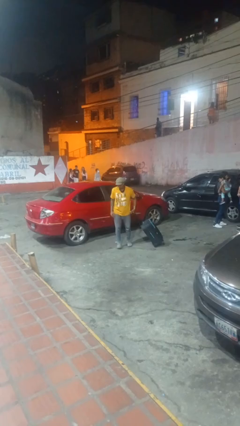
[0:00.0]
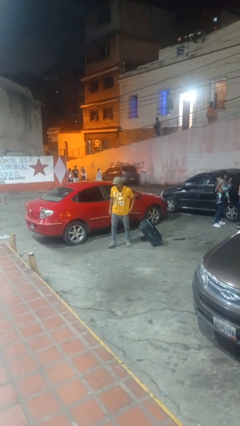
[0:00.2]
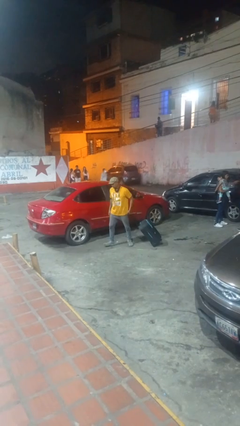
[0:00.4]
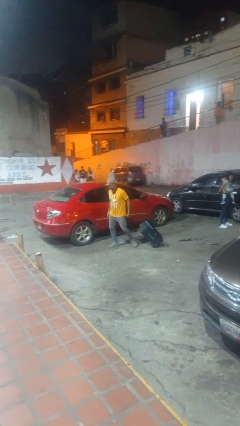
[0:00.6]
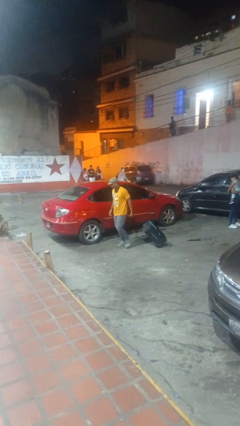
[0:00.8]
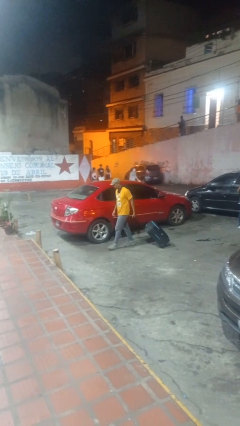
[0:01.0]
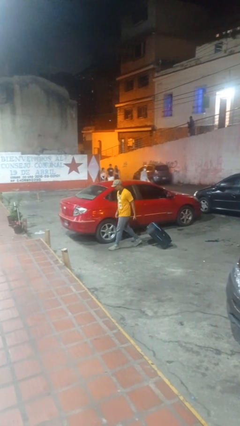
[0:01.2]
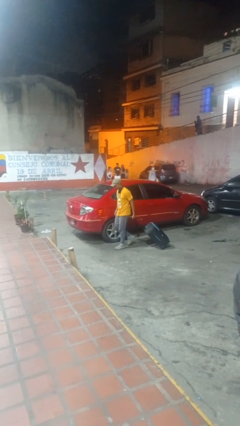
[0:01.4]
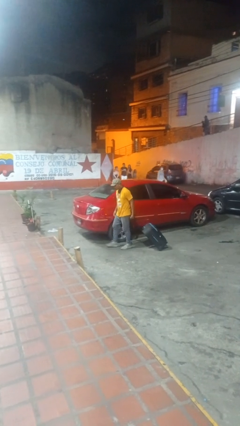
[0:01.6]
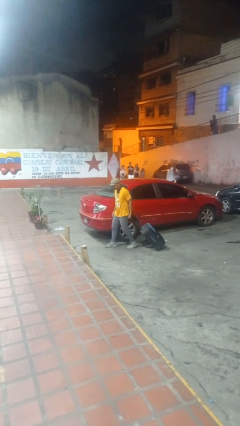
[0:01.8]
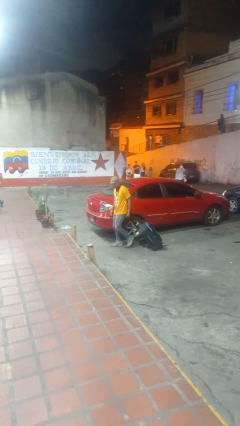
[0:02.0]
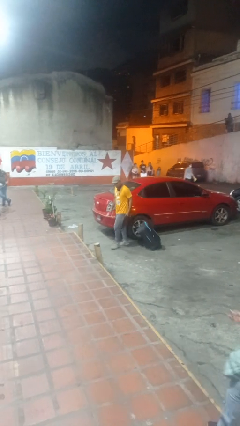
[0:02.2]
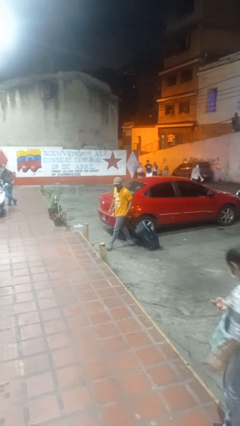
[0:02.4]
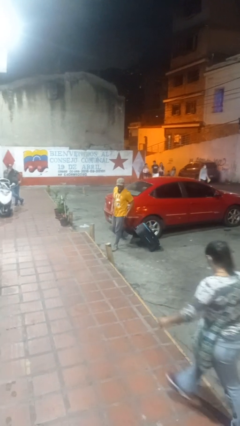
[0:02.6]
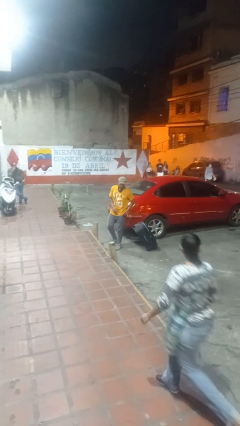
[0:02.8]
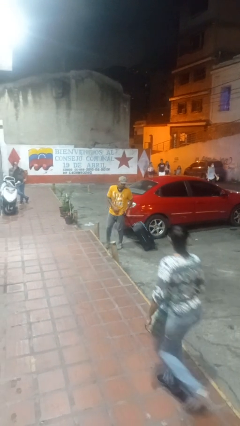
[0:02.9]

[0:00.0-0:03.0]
person pulls wheeled cart

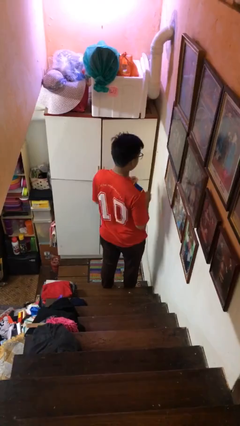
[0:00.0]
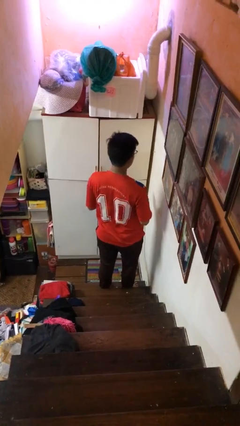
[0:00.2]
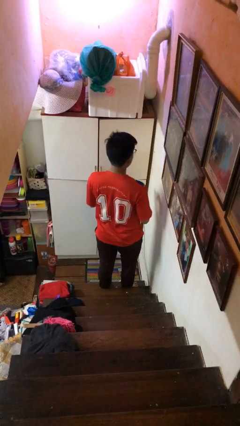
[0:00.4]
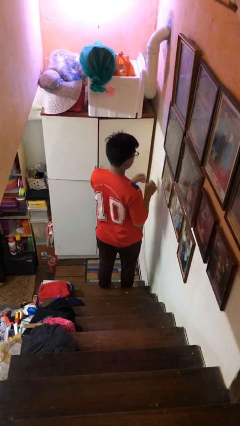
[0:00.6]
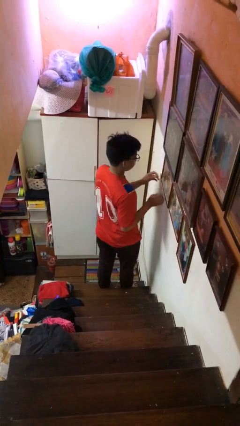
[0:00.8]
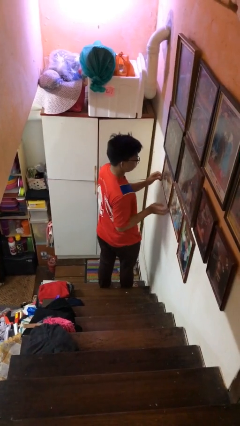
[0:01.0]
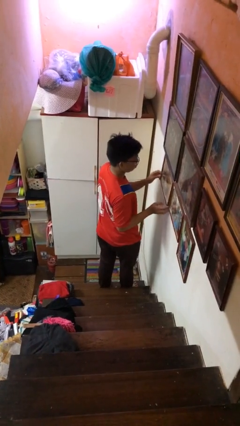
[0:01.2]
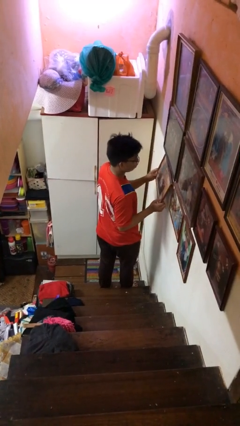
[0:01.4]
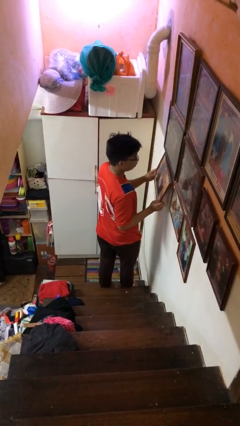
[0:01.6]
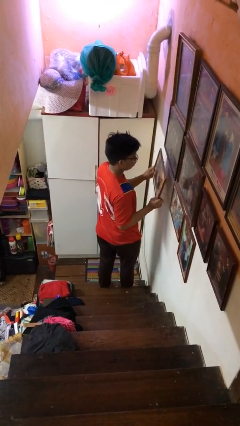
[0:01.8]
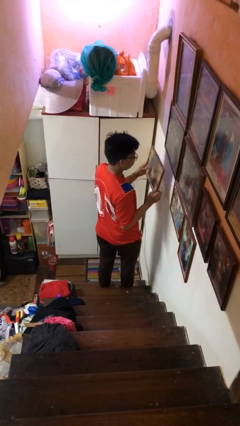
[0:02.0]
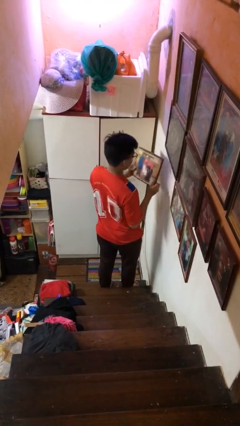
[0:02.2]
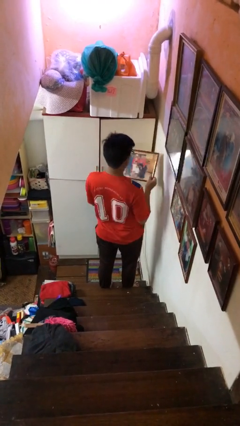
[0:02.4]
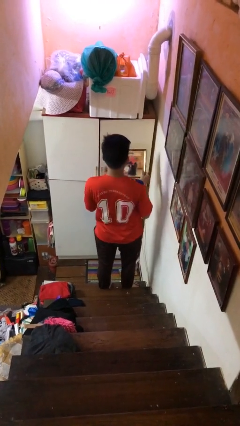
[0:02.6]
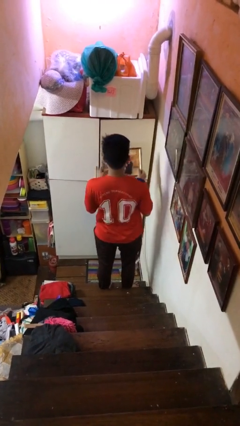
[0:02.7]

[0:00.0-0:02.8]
person takes down picture frame

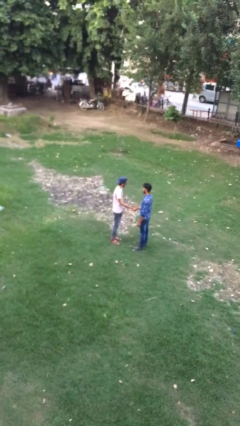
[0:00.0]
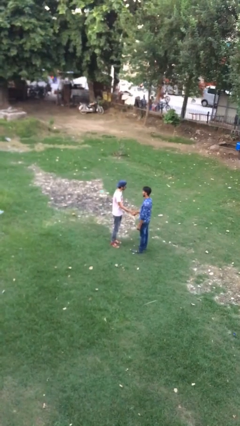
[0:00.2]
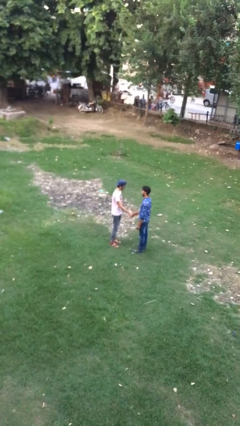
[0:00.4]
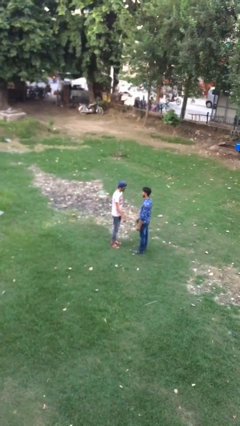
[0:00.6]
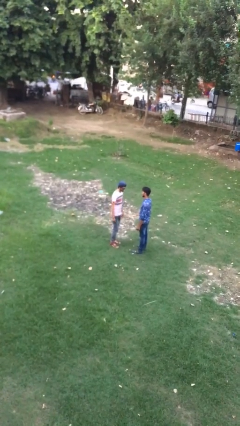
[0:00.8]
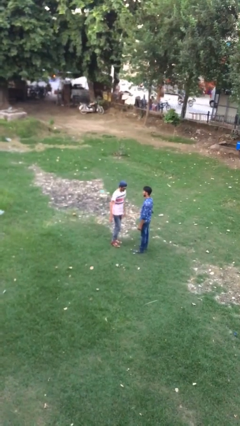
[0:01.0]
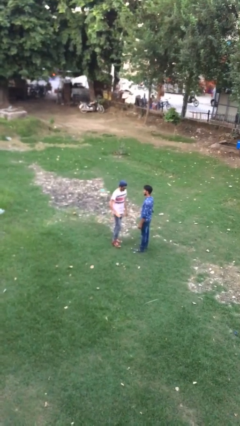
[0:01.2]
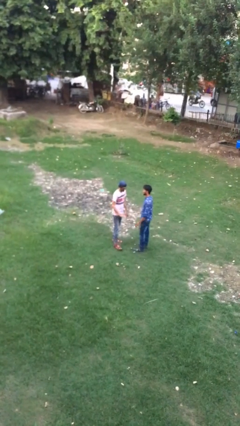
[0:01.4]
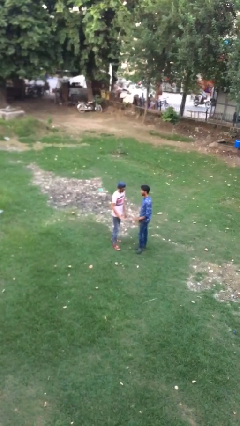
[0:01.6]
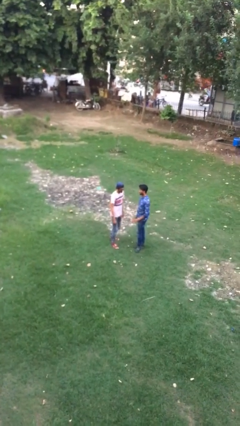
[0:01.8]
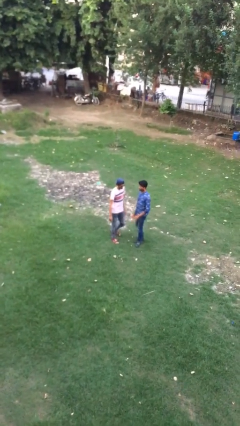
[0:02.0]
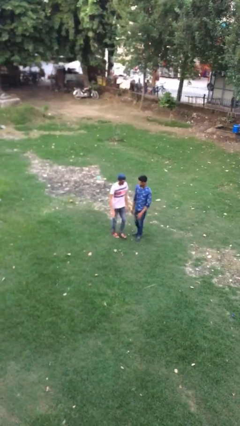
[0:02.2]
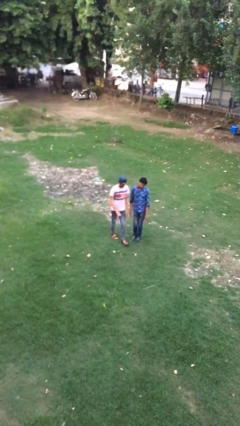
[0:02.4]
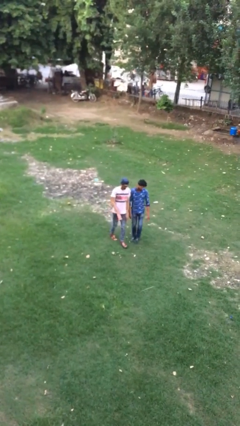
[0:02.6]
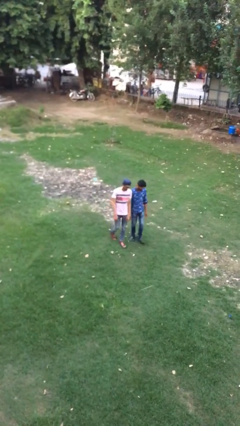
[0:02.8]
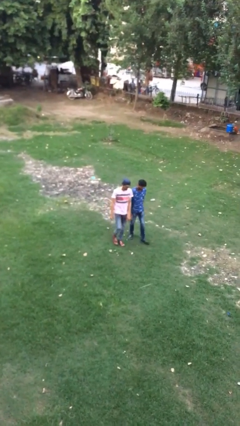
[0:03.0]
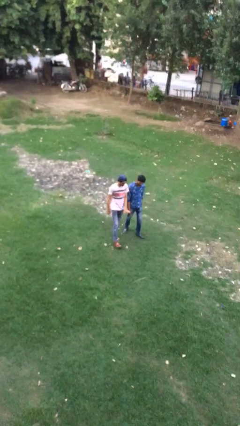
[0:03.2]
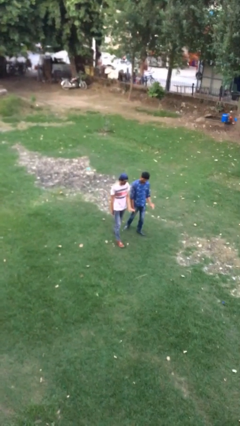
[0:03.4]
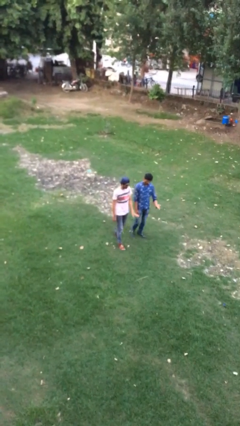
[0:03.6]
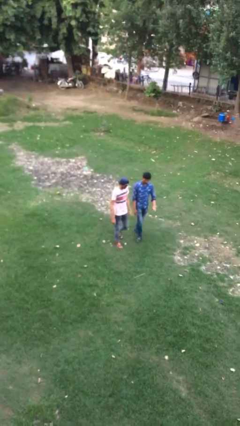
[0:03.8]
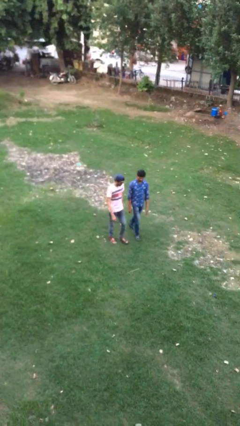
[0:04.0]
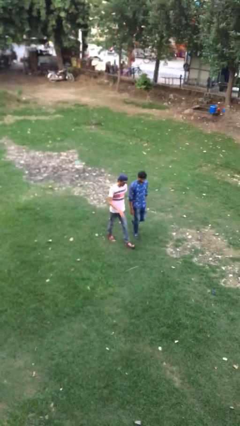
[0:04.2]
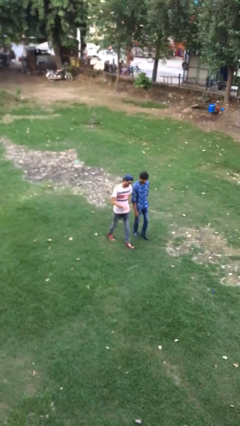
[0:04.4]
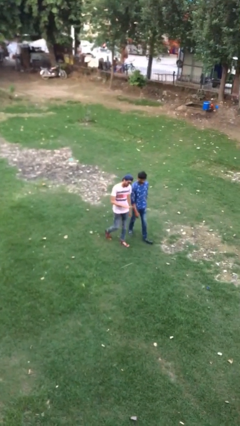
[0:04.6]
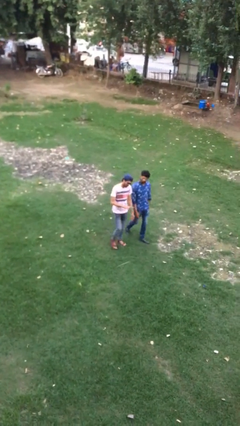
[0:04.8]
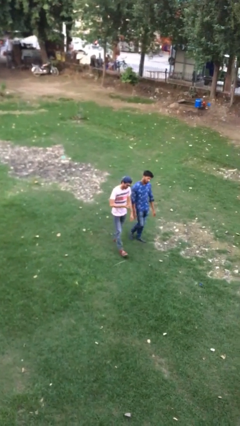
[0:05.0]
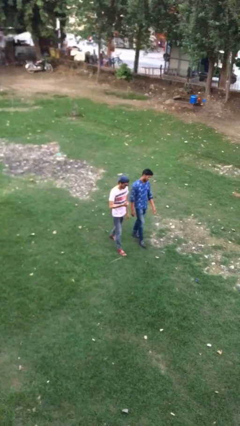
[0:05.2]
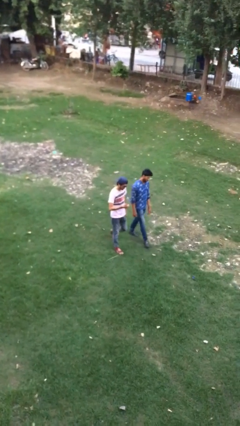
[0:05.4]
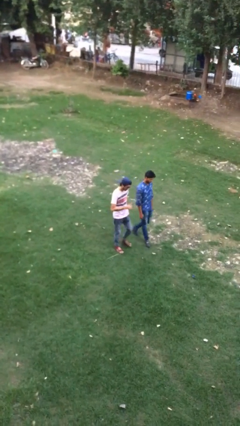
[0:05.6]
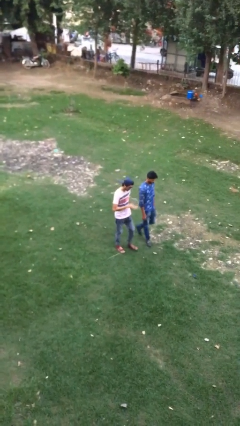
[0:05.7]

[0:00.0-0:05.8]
person talks to person

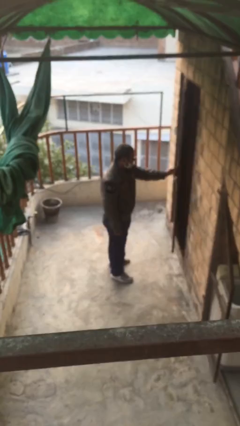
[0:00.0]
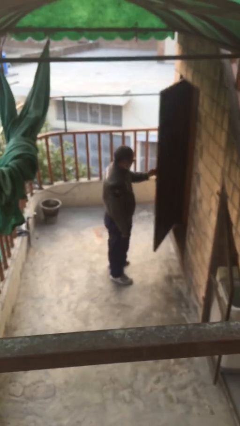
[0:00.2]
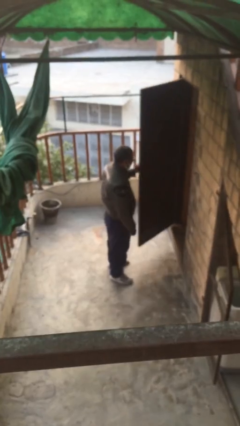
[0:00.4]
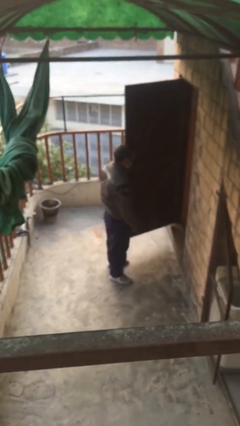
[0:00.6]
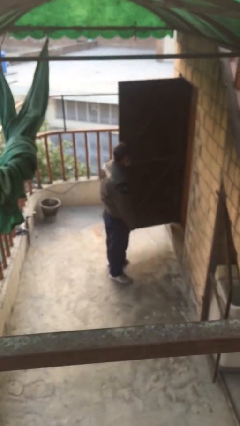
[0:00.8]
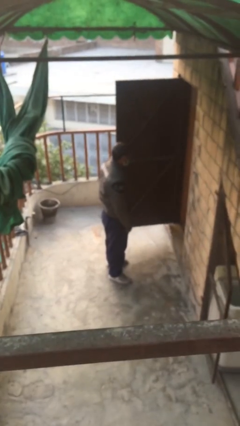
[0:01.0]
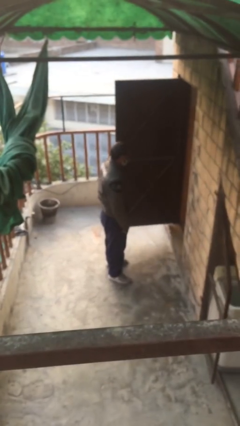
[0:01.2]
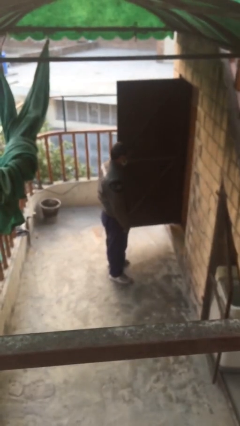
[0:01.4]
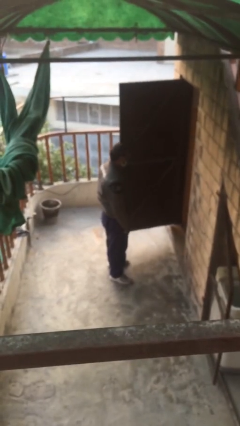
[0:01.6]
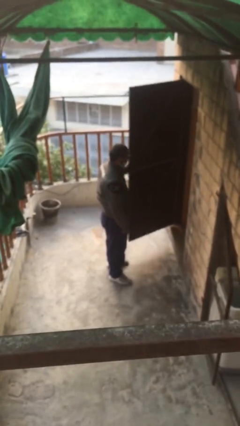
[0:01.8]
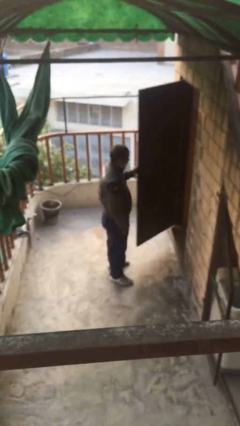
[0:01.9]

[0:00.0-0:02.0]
person opens facility door

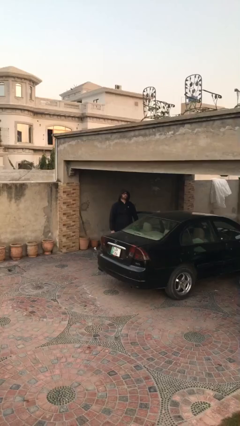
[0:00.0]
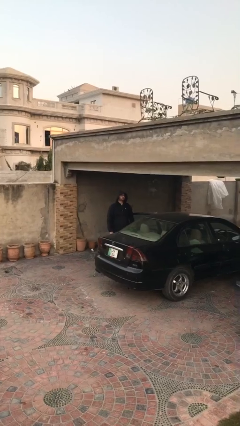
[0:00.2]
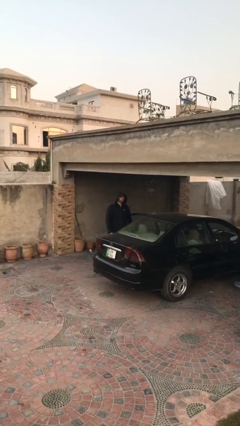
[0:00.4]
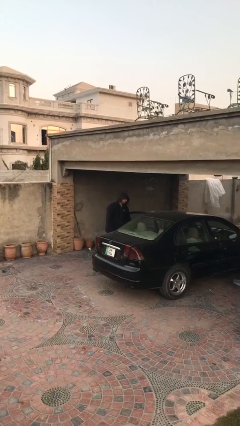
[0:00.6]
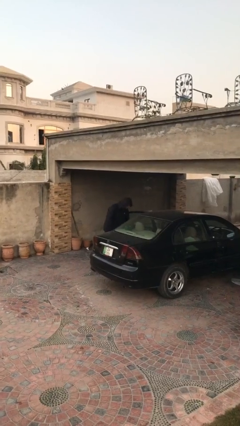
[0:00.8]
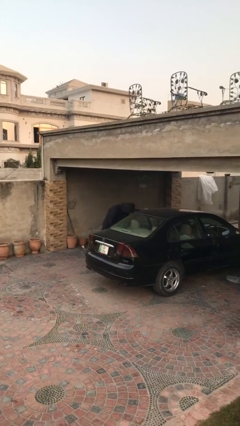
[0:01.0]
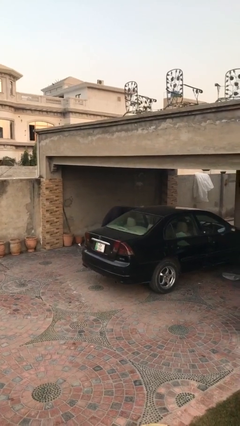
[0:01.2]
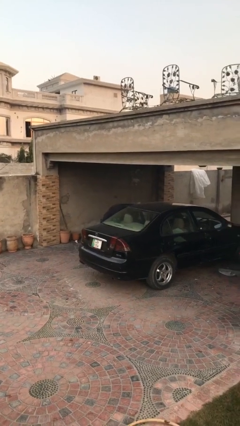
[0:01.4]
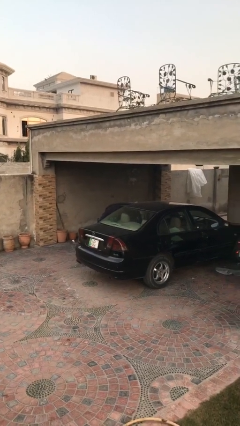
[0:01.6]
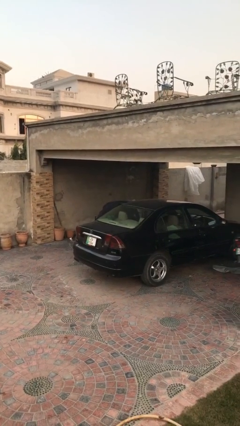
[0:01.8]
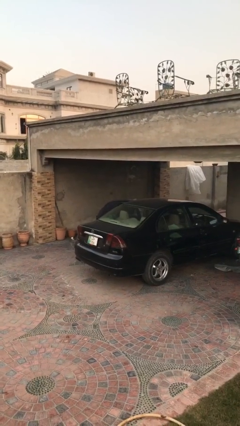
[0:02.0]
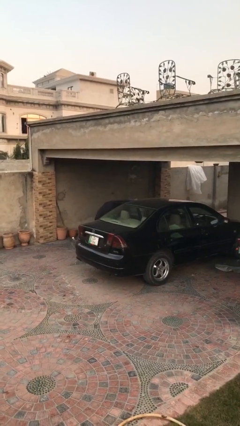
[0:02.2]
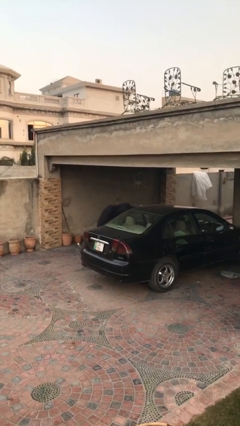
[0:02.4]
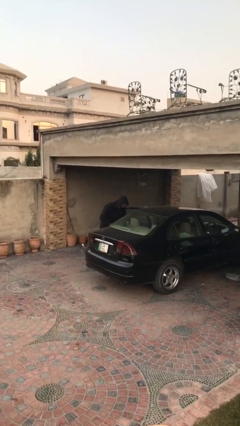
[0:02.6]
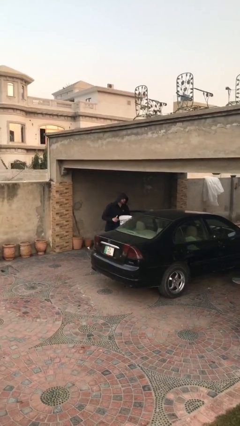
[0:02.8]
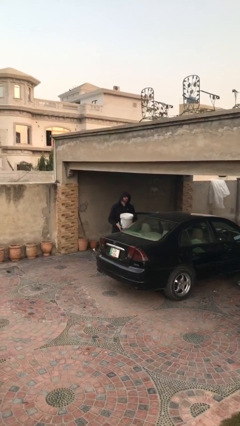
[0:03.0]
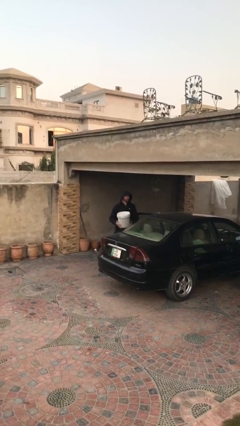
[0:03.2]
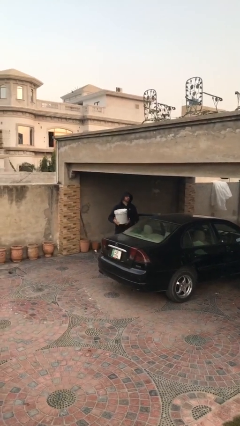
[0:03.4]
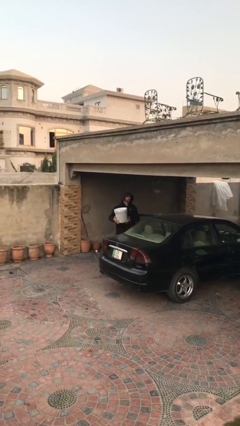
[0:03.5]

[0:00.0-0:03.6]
person unloads car

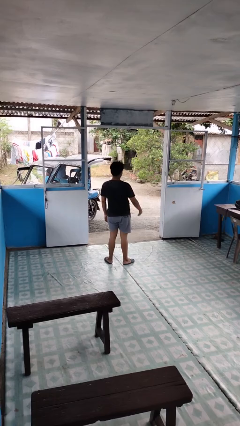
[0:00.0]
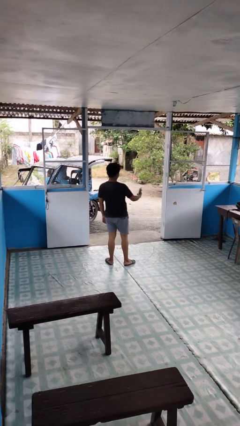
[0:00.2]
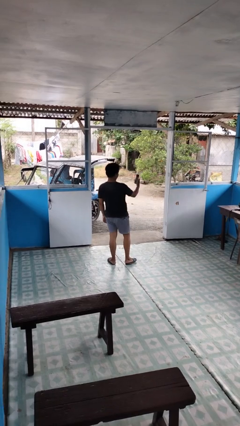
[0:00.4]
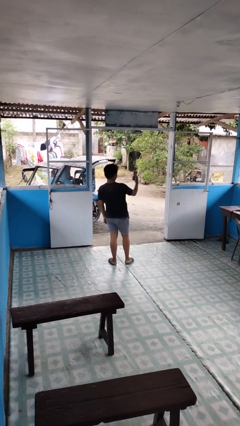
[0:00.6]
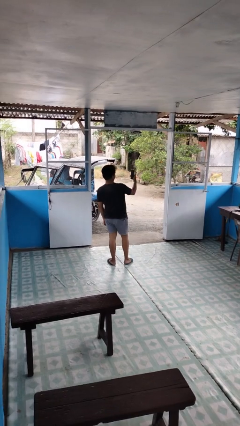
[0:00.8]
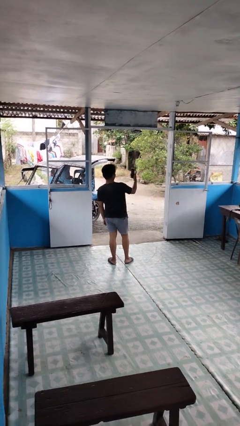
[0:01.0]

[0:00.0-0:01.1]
person takes selfie
